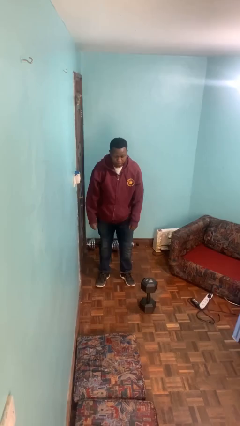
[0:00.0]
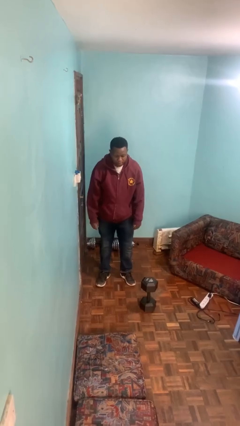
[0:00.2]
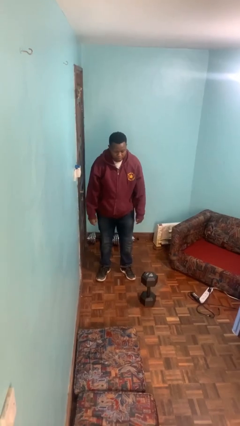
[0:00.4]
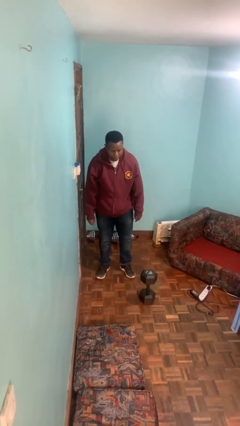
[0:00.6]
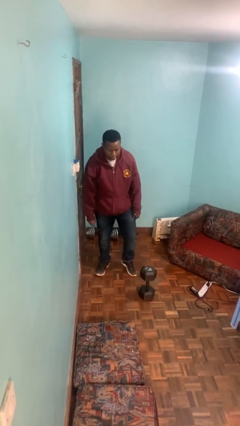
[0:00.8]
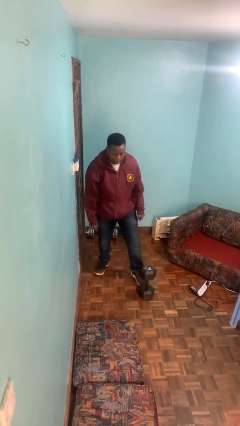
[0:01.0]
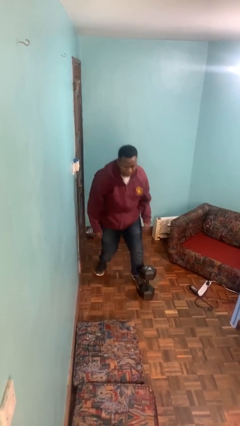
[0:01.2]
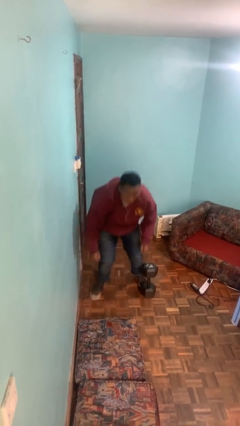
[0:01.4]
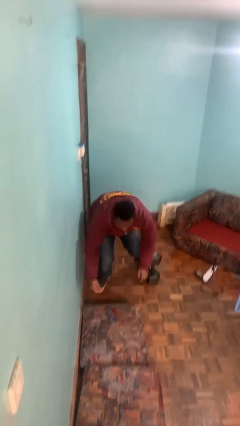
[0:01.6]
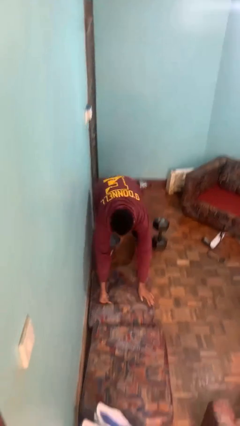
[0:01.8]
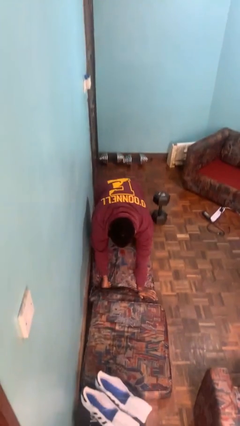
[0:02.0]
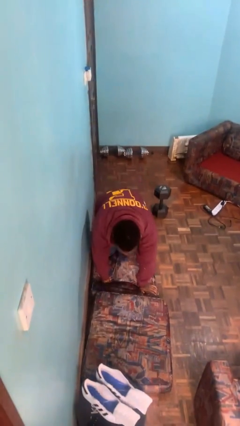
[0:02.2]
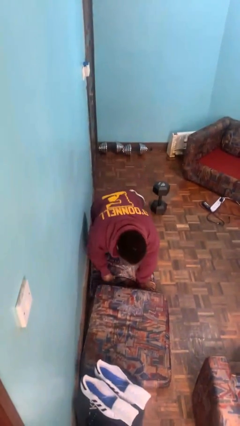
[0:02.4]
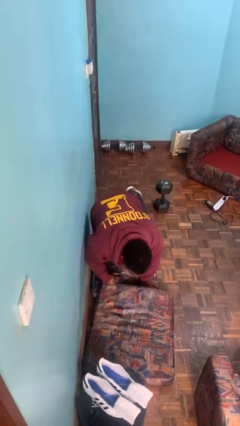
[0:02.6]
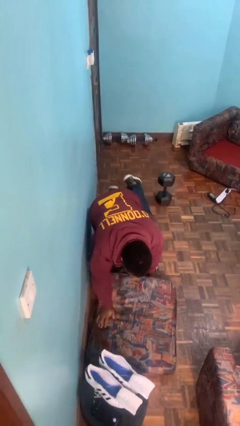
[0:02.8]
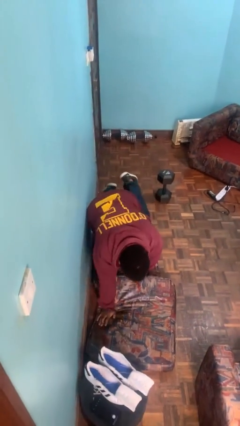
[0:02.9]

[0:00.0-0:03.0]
person trips on object on floor

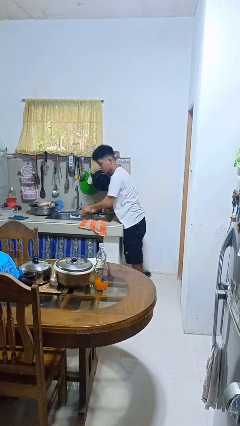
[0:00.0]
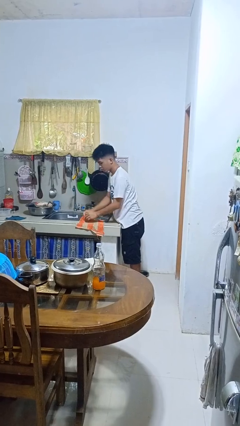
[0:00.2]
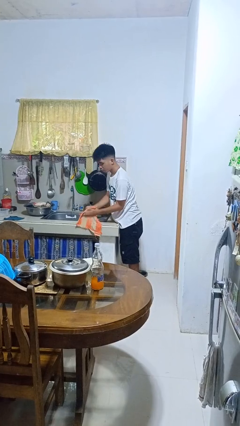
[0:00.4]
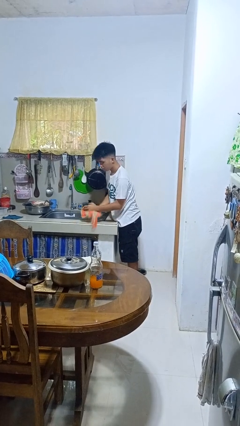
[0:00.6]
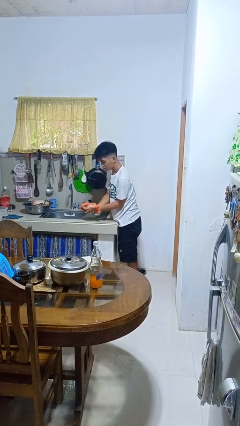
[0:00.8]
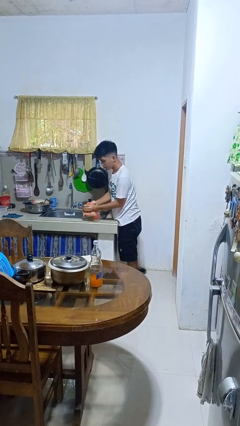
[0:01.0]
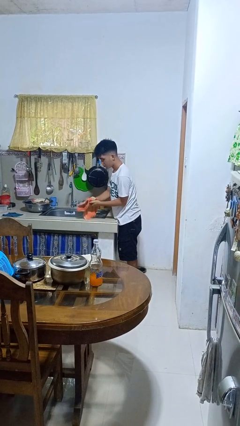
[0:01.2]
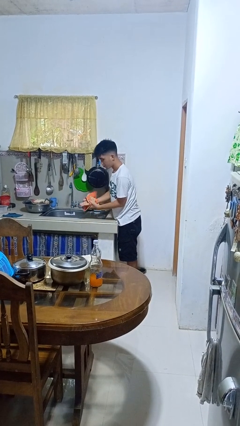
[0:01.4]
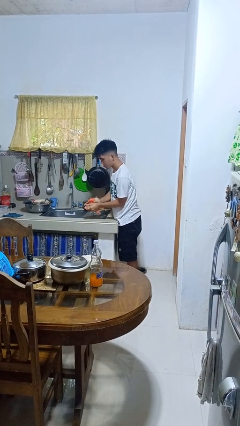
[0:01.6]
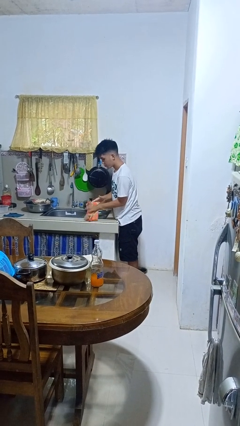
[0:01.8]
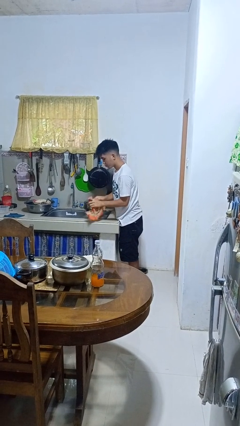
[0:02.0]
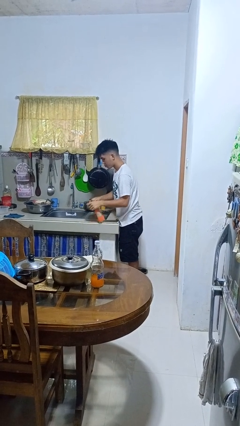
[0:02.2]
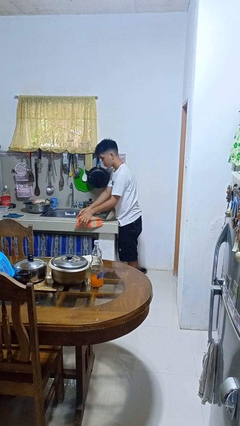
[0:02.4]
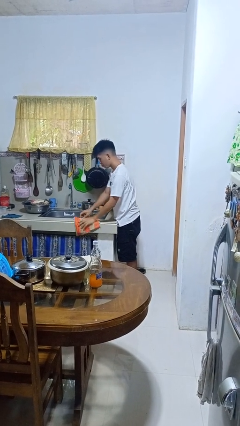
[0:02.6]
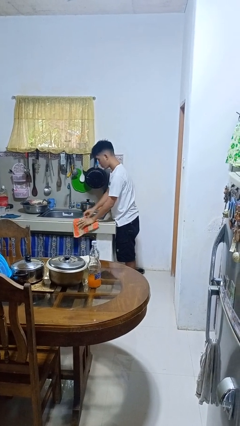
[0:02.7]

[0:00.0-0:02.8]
person dries hands with towel

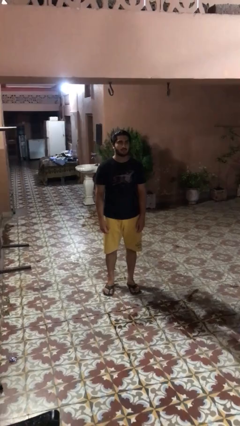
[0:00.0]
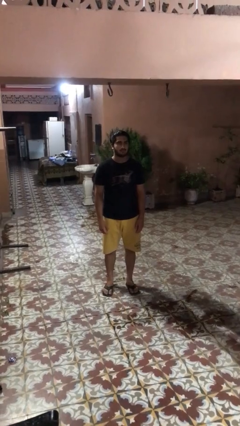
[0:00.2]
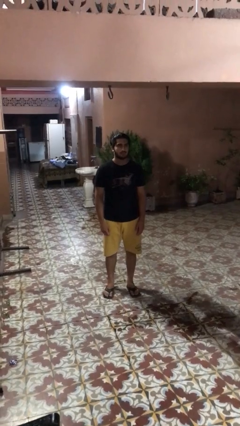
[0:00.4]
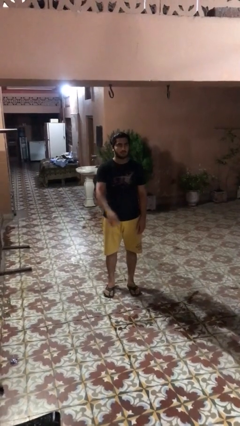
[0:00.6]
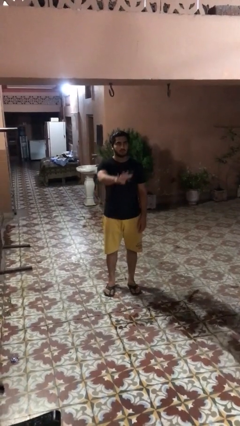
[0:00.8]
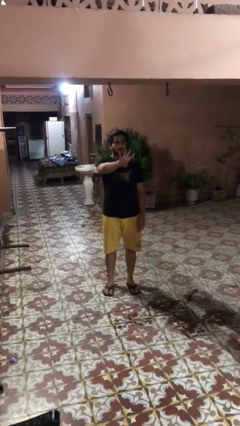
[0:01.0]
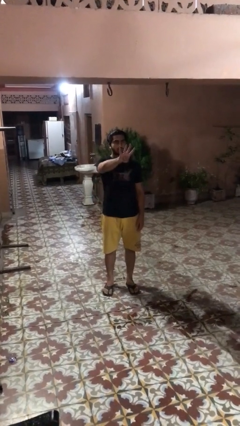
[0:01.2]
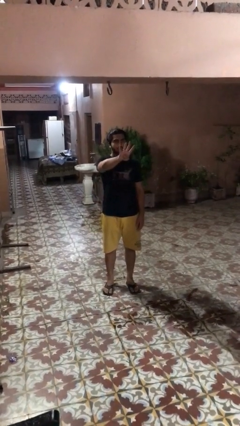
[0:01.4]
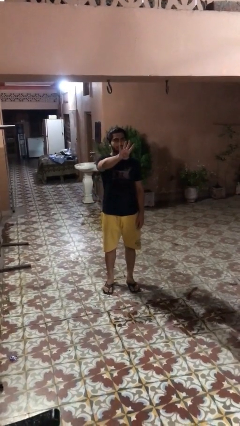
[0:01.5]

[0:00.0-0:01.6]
person gestures number four

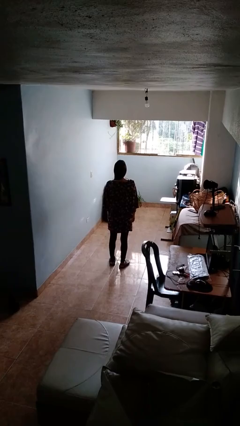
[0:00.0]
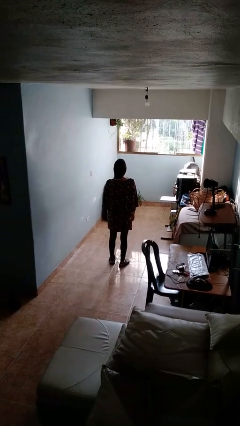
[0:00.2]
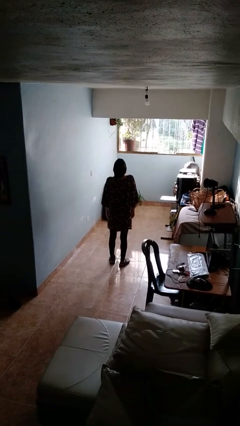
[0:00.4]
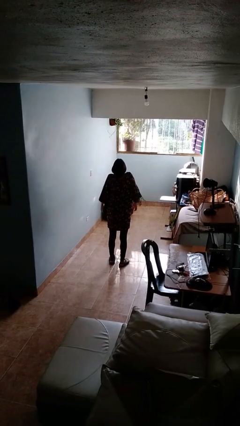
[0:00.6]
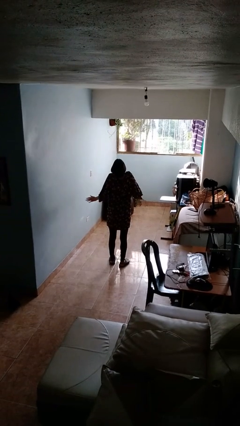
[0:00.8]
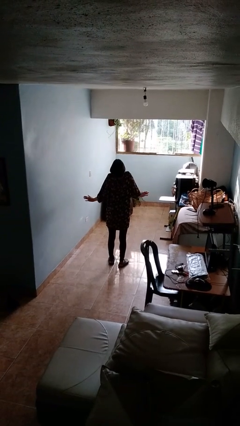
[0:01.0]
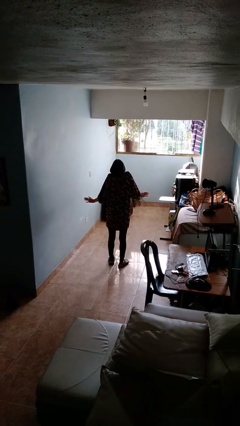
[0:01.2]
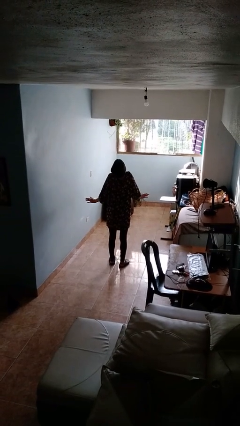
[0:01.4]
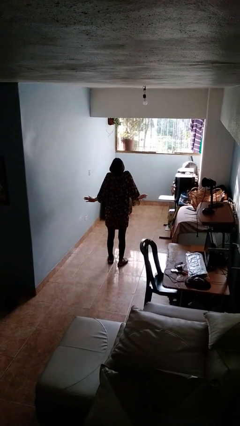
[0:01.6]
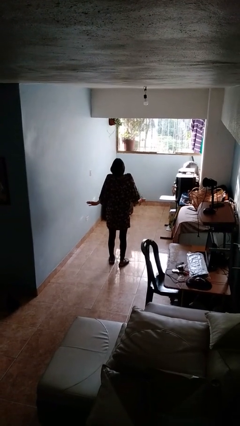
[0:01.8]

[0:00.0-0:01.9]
person shrugs

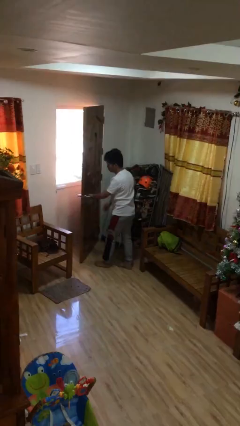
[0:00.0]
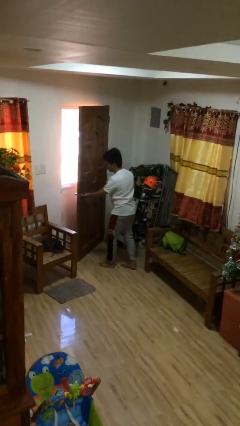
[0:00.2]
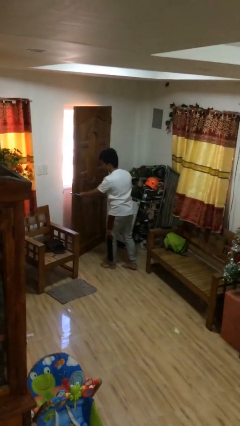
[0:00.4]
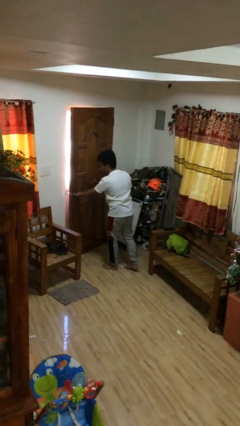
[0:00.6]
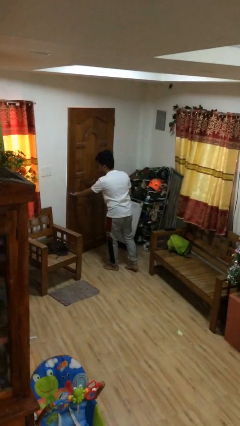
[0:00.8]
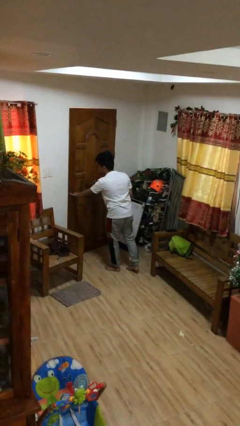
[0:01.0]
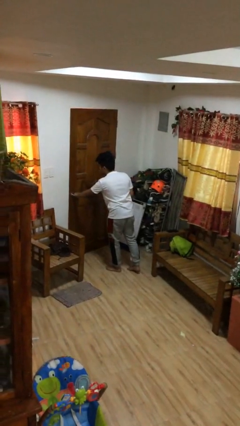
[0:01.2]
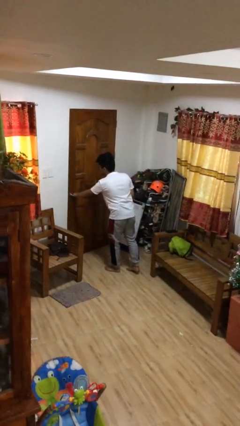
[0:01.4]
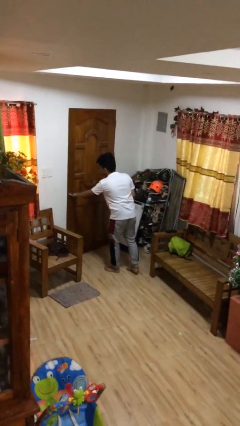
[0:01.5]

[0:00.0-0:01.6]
person closes facility door

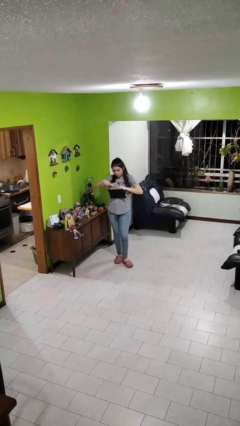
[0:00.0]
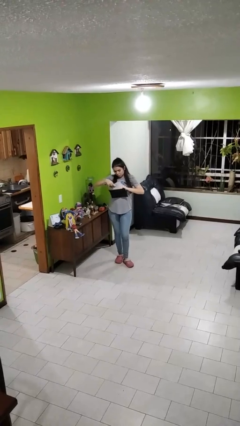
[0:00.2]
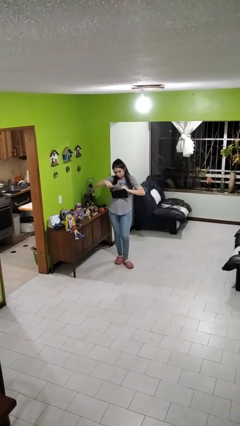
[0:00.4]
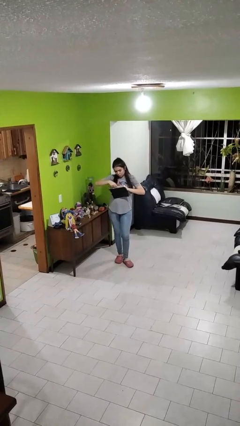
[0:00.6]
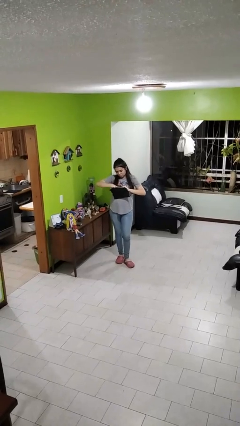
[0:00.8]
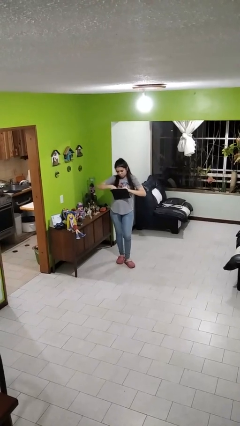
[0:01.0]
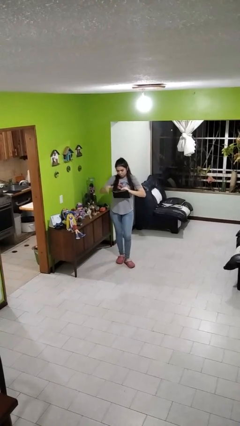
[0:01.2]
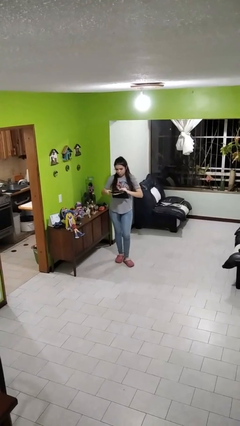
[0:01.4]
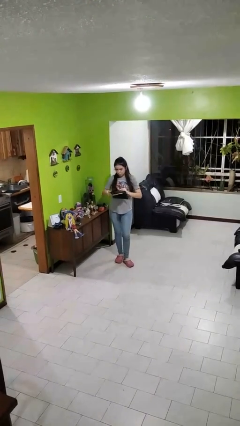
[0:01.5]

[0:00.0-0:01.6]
person puts object into purse

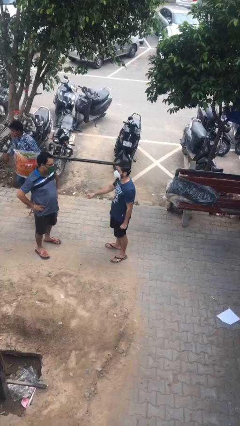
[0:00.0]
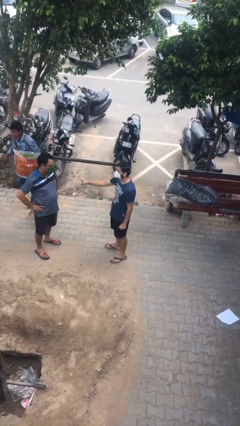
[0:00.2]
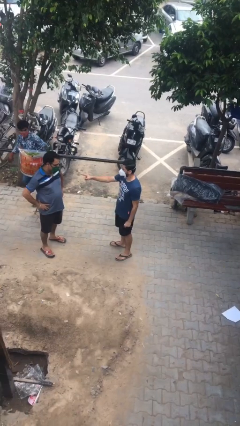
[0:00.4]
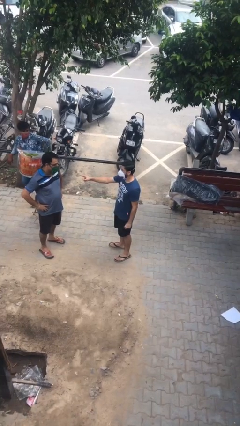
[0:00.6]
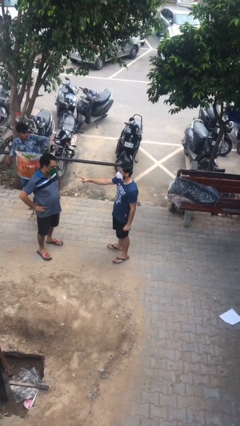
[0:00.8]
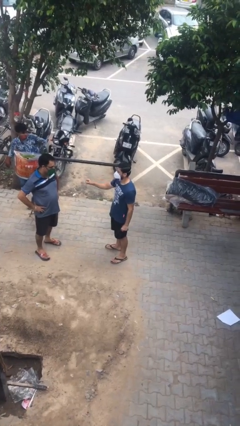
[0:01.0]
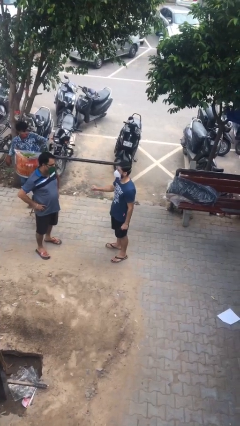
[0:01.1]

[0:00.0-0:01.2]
person points at person

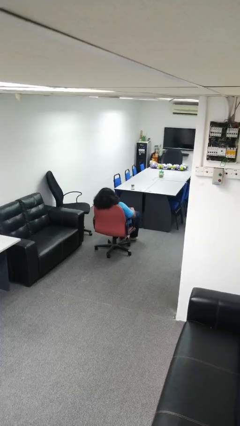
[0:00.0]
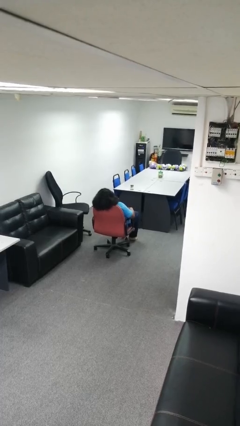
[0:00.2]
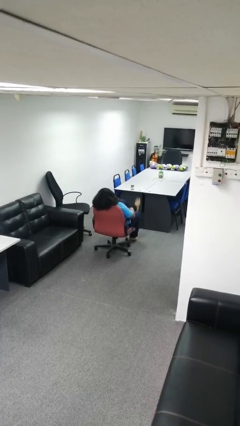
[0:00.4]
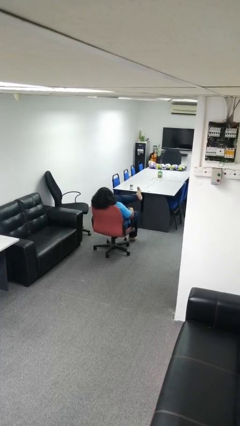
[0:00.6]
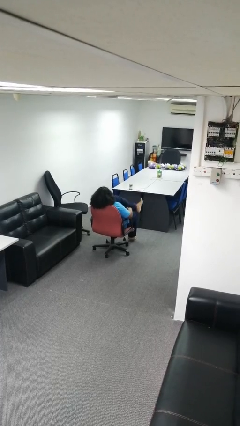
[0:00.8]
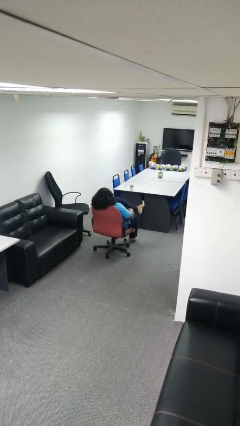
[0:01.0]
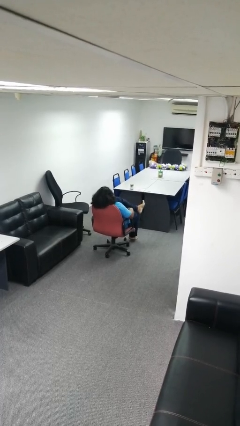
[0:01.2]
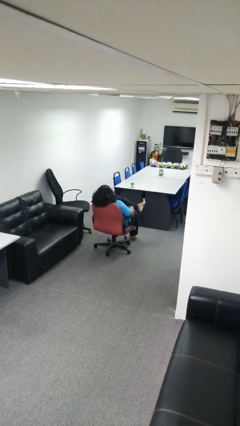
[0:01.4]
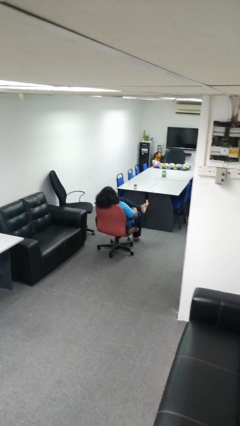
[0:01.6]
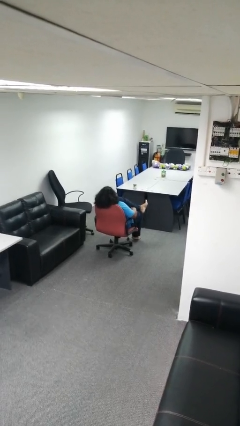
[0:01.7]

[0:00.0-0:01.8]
person crosses legs

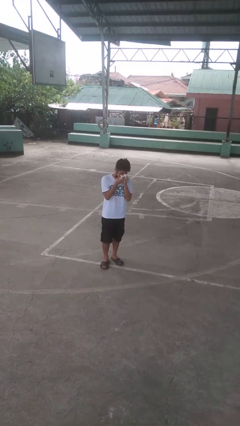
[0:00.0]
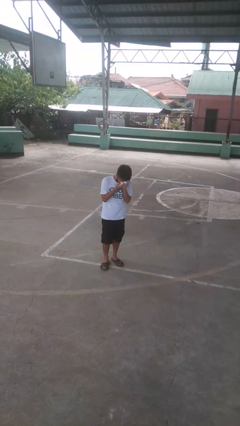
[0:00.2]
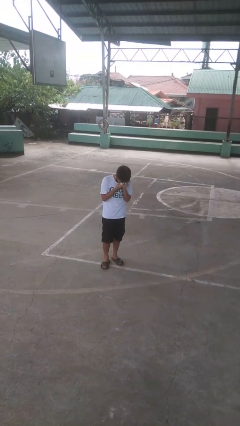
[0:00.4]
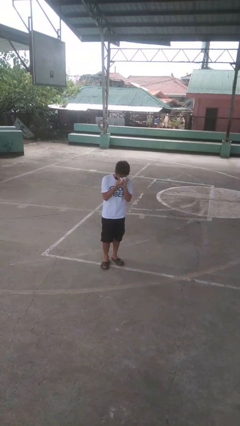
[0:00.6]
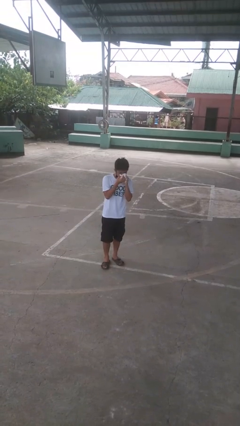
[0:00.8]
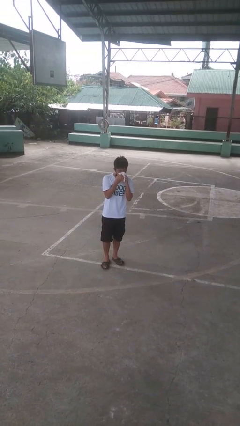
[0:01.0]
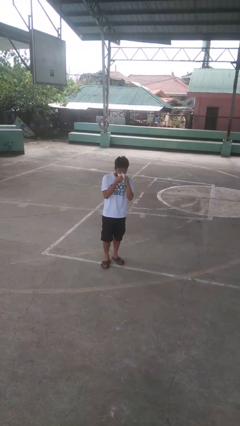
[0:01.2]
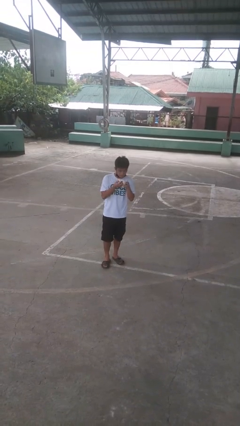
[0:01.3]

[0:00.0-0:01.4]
person blows nose
